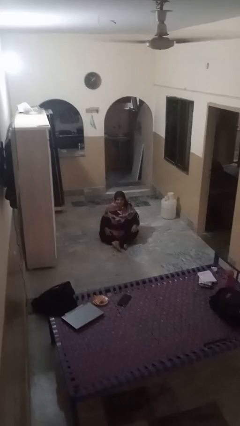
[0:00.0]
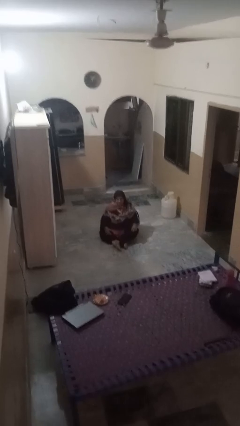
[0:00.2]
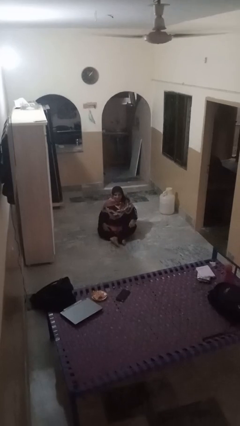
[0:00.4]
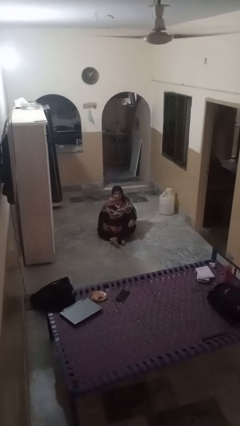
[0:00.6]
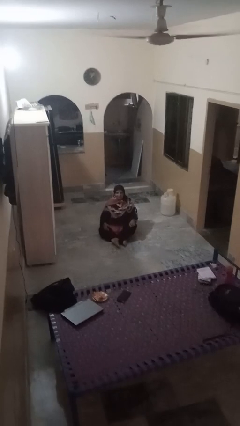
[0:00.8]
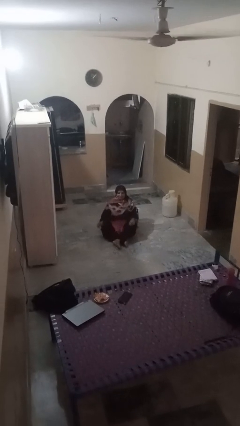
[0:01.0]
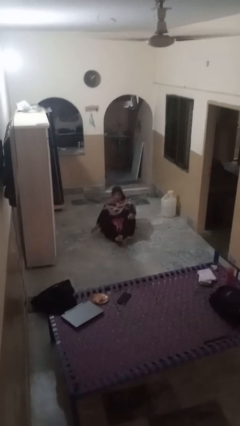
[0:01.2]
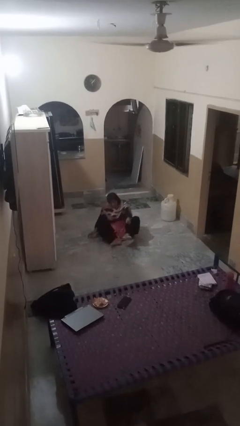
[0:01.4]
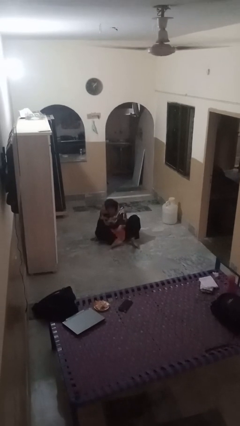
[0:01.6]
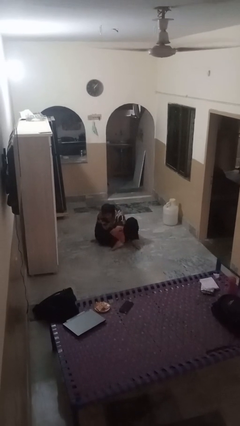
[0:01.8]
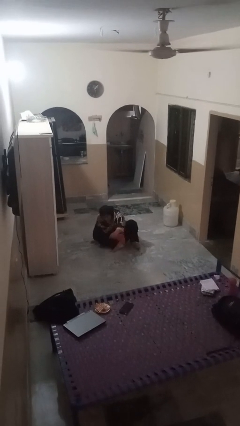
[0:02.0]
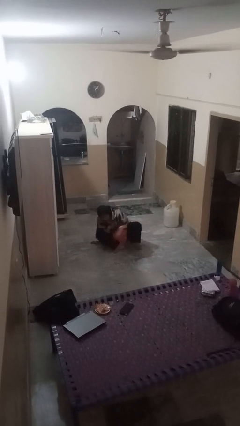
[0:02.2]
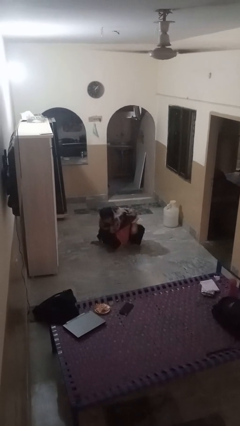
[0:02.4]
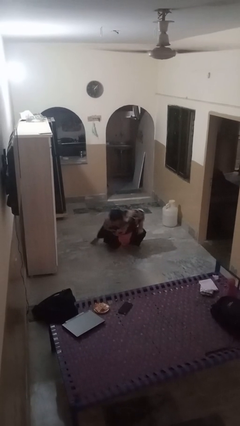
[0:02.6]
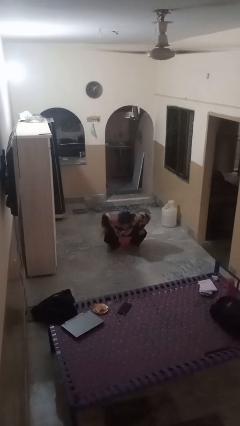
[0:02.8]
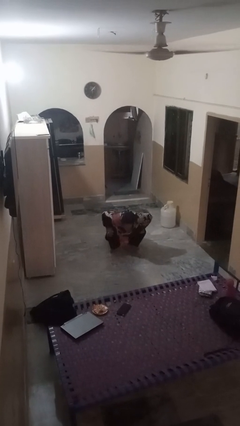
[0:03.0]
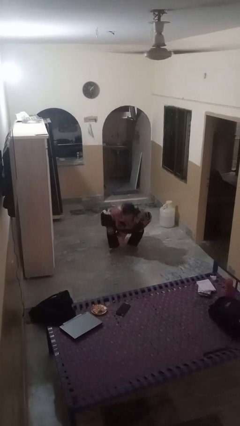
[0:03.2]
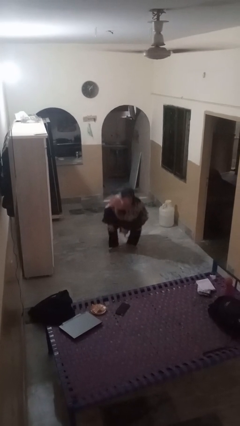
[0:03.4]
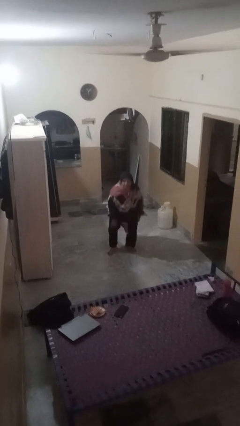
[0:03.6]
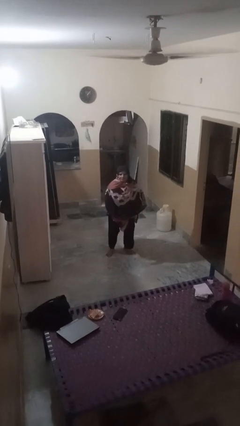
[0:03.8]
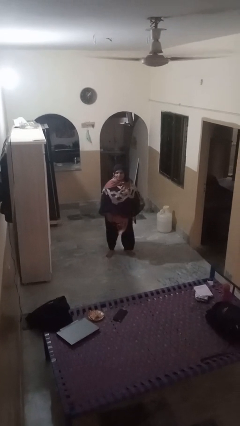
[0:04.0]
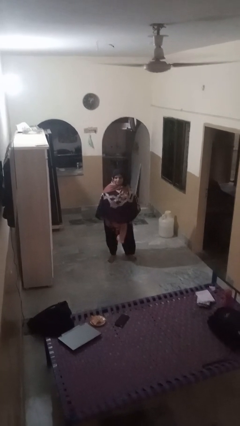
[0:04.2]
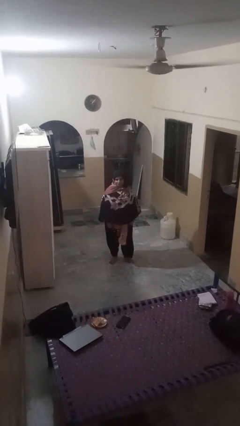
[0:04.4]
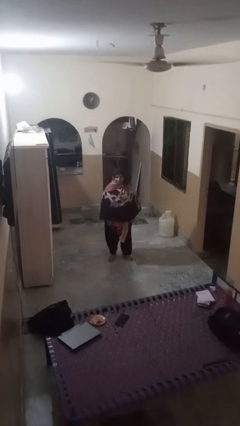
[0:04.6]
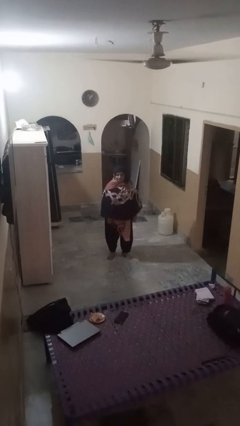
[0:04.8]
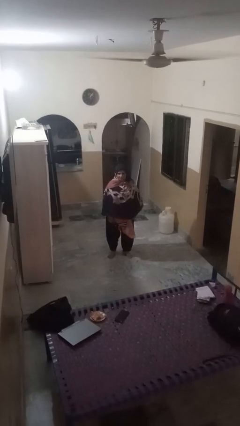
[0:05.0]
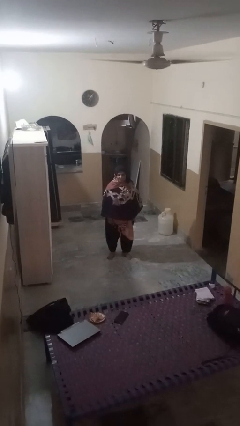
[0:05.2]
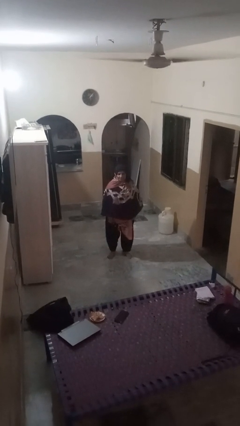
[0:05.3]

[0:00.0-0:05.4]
person stands up from floor

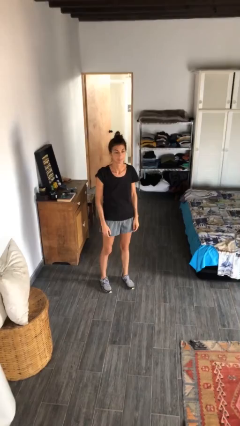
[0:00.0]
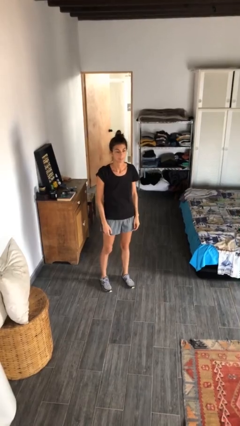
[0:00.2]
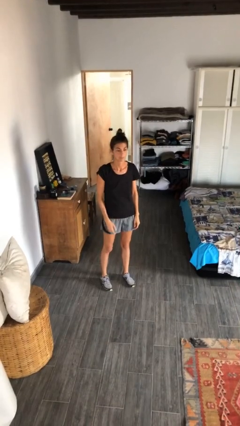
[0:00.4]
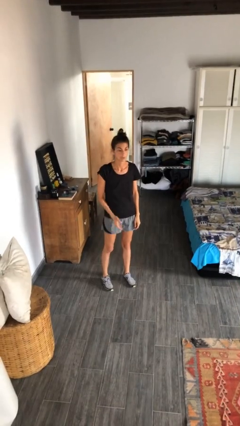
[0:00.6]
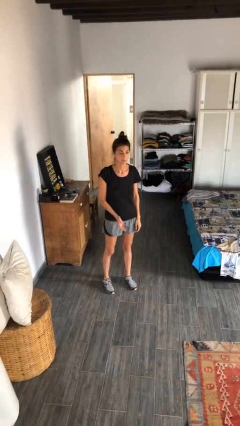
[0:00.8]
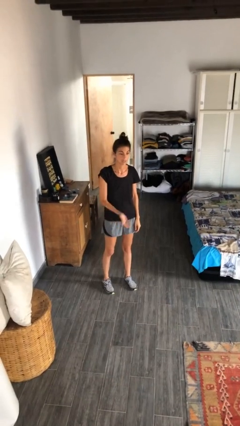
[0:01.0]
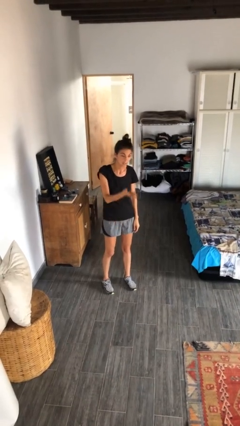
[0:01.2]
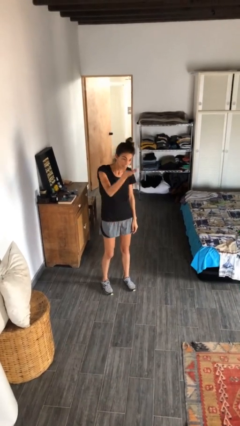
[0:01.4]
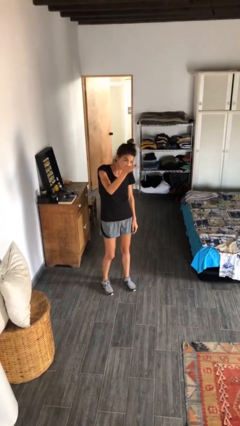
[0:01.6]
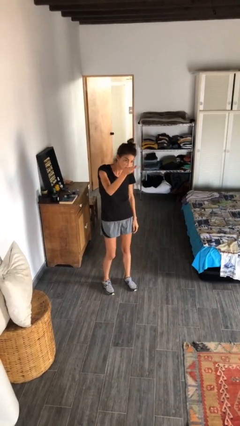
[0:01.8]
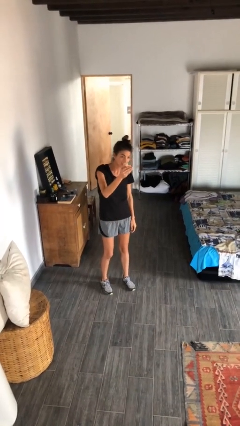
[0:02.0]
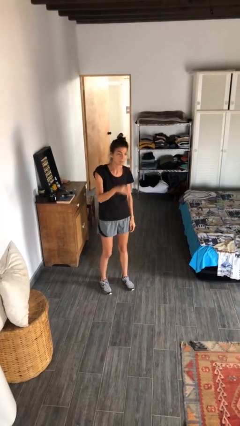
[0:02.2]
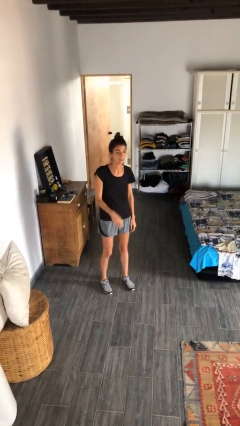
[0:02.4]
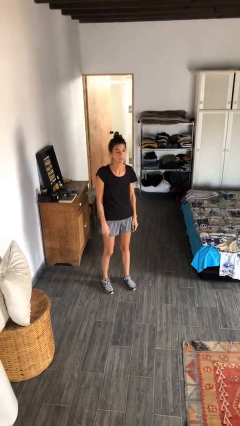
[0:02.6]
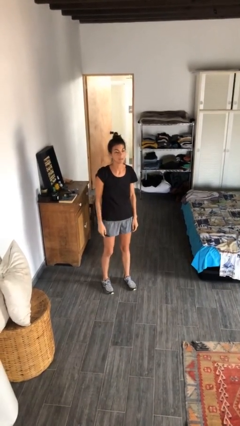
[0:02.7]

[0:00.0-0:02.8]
person gestures swipe up

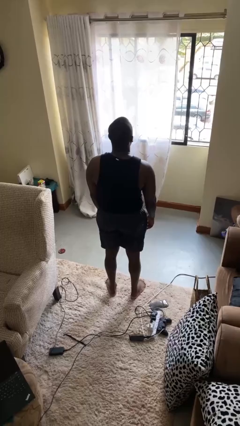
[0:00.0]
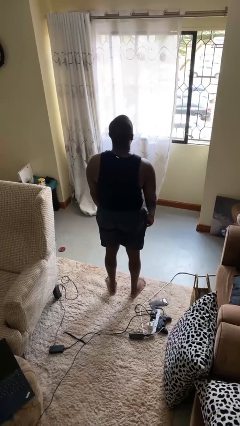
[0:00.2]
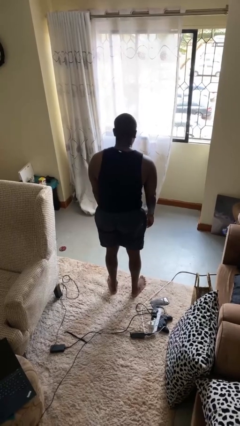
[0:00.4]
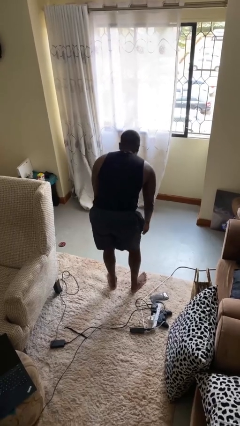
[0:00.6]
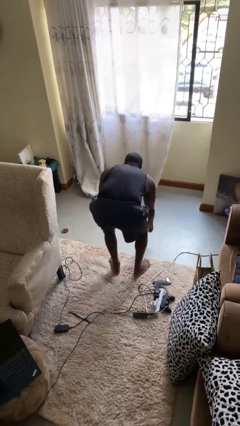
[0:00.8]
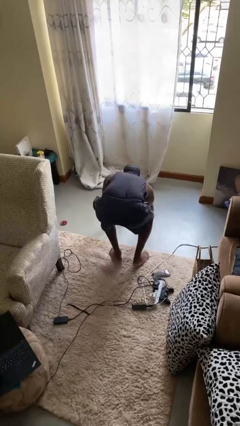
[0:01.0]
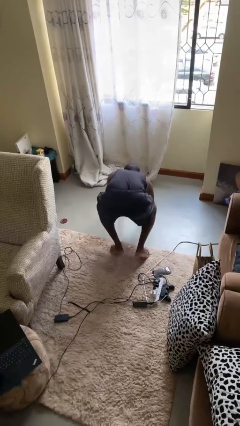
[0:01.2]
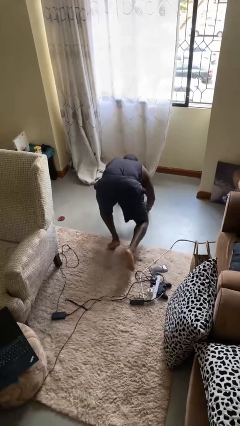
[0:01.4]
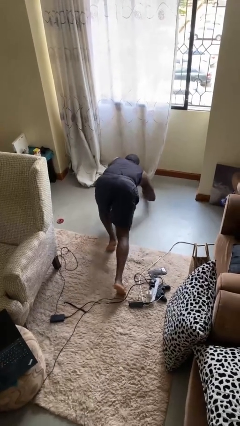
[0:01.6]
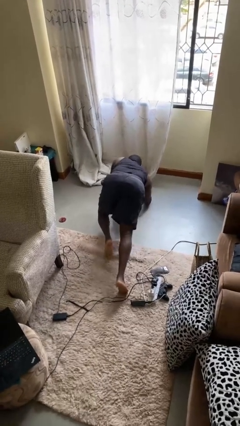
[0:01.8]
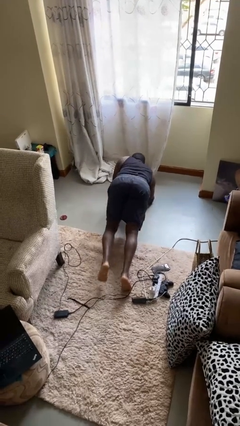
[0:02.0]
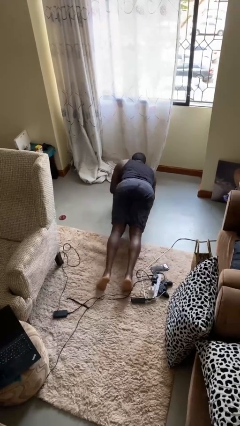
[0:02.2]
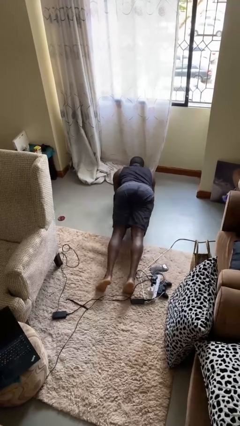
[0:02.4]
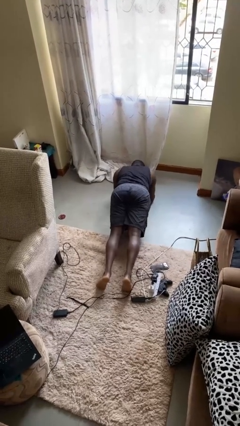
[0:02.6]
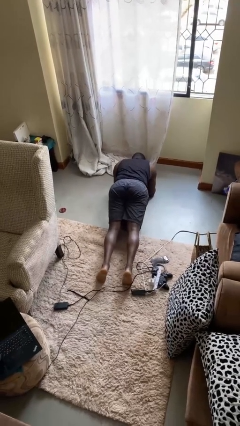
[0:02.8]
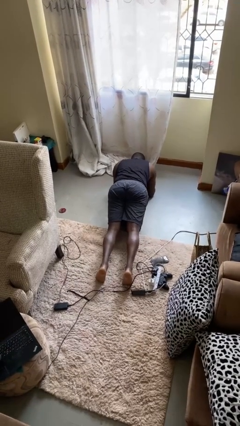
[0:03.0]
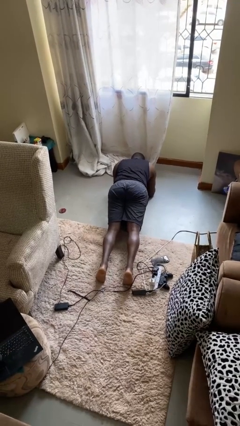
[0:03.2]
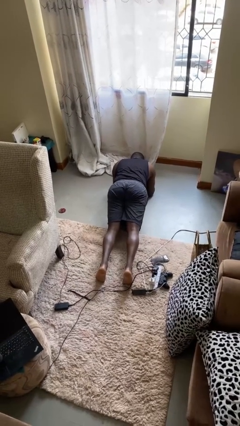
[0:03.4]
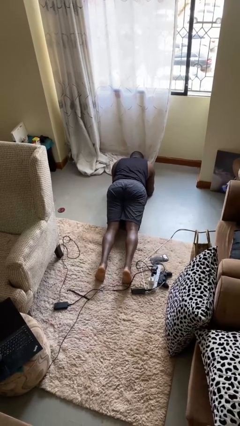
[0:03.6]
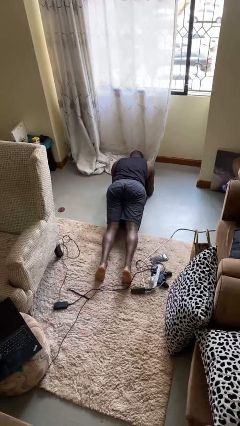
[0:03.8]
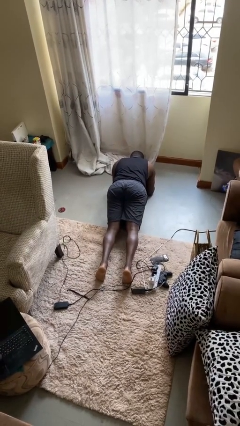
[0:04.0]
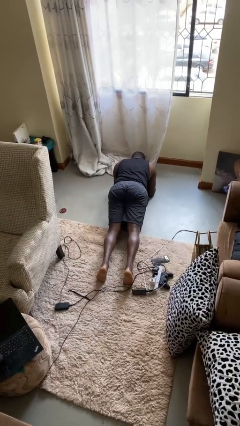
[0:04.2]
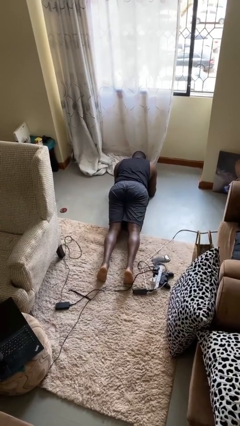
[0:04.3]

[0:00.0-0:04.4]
person exercises with plank

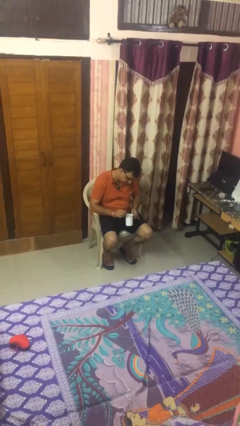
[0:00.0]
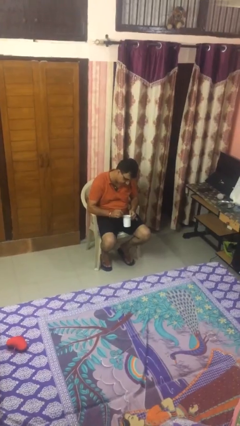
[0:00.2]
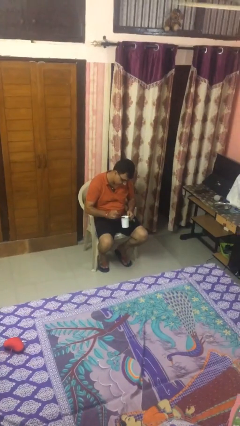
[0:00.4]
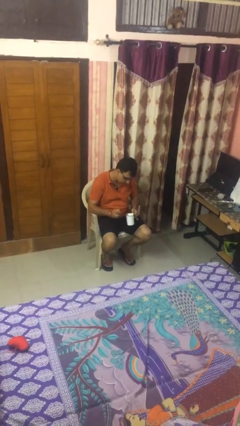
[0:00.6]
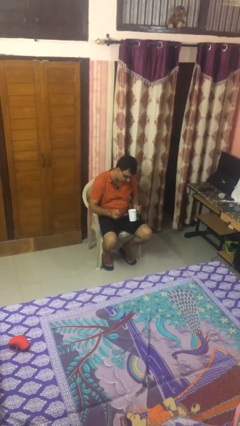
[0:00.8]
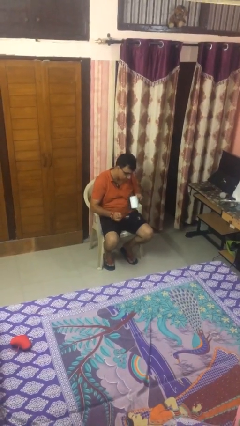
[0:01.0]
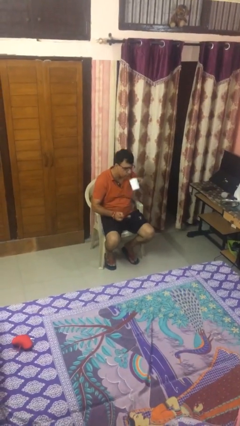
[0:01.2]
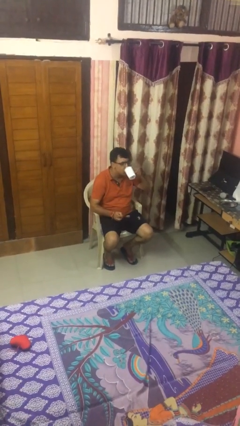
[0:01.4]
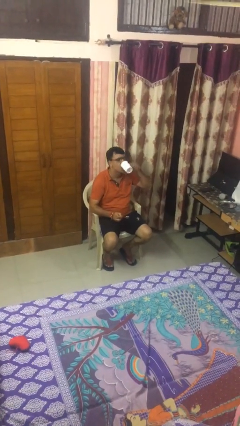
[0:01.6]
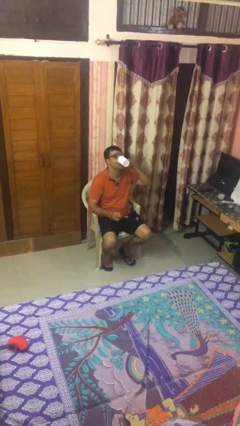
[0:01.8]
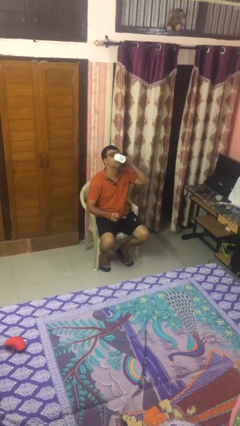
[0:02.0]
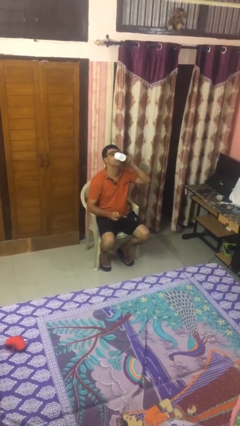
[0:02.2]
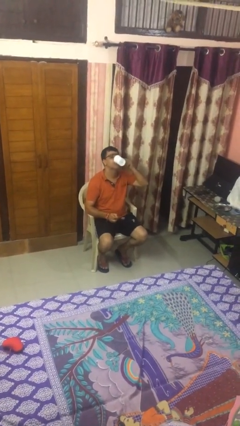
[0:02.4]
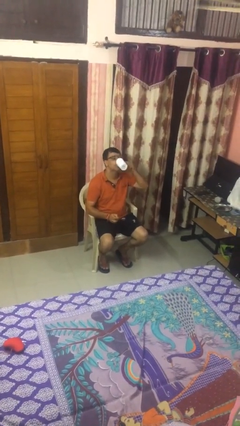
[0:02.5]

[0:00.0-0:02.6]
person drinks from mug

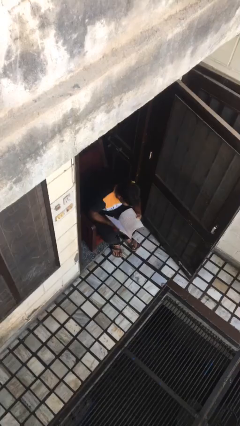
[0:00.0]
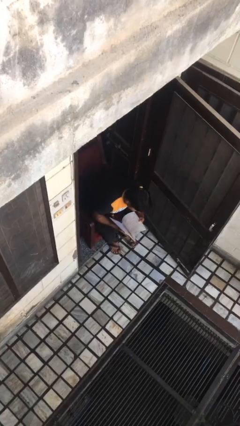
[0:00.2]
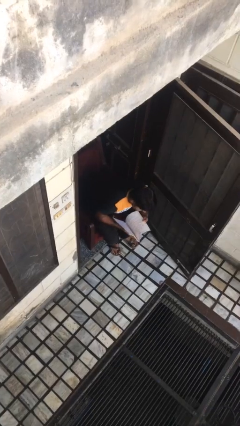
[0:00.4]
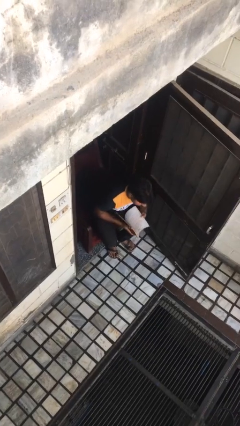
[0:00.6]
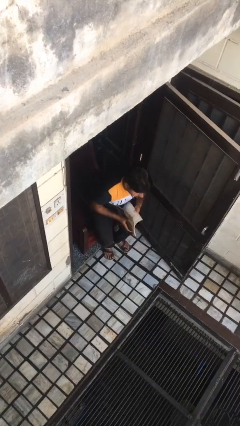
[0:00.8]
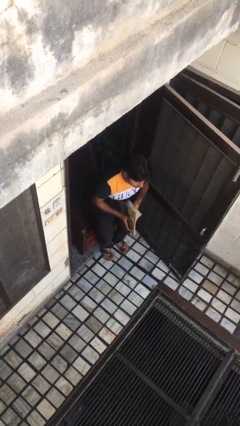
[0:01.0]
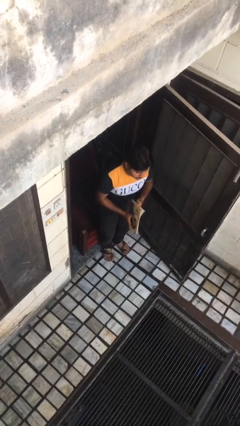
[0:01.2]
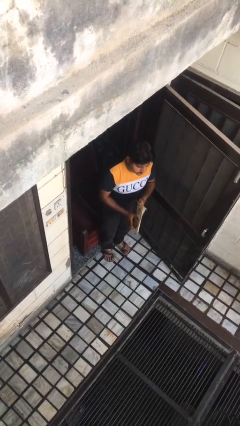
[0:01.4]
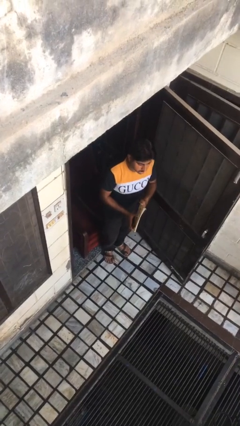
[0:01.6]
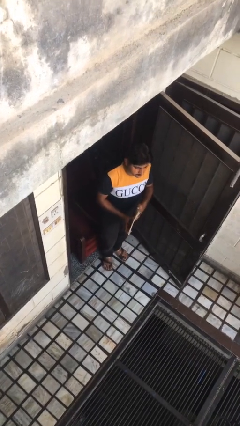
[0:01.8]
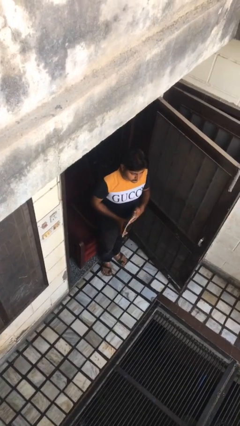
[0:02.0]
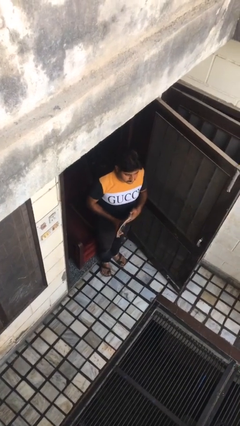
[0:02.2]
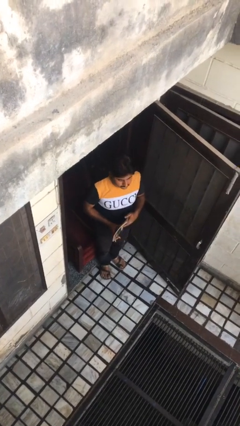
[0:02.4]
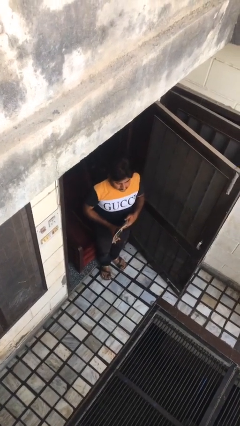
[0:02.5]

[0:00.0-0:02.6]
person stands up
